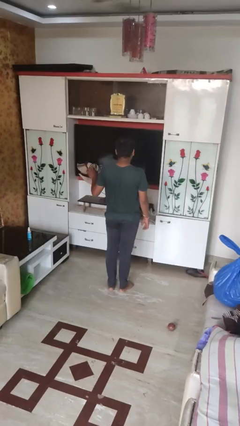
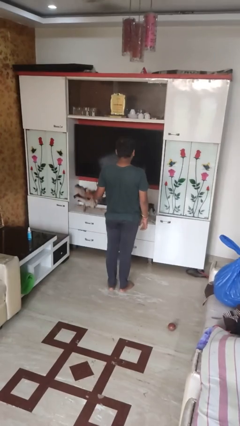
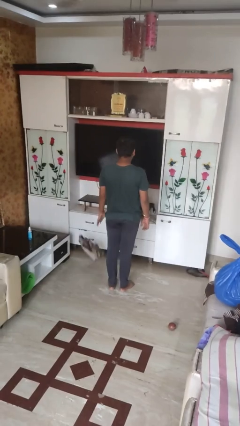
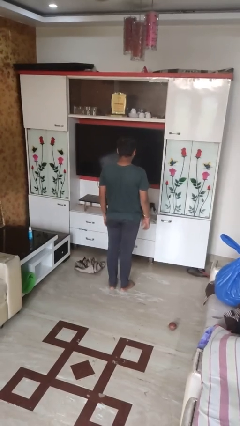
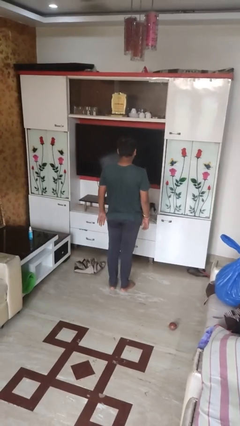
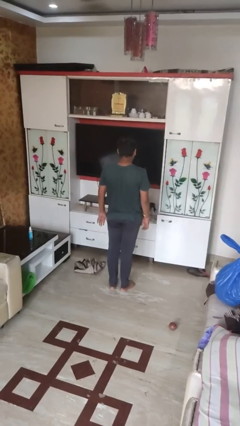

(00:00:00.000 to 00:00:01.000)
person throws object to ground

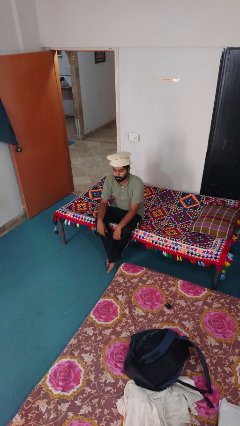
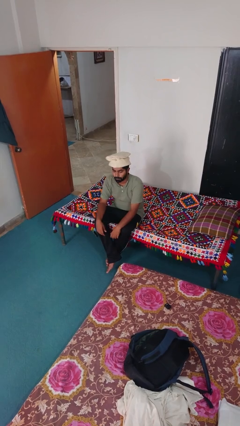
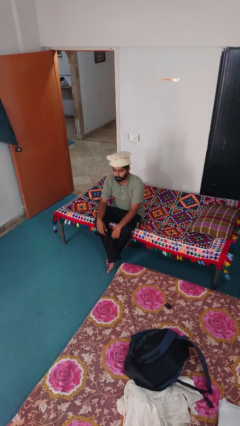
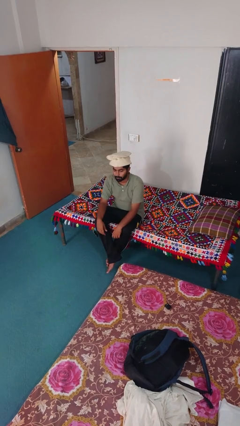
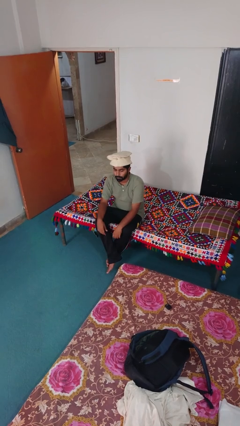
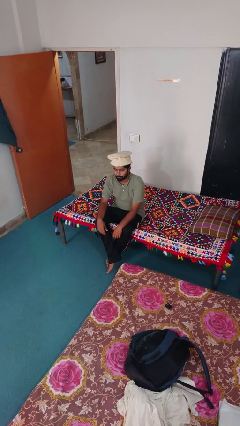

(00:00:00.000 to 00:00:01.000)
person takes off hat

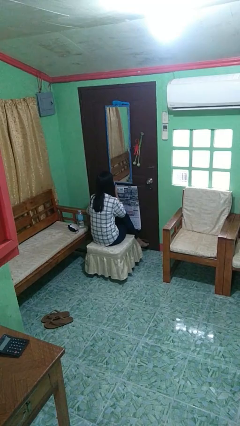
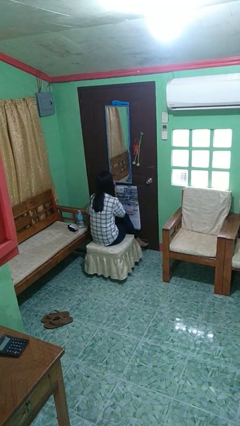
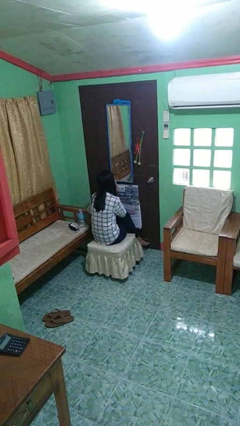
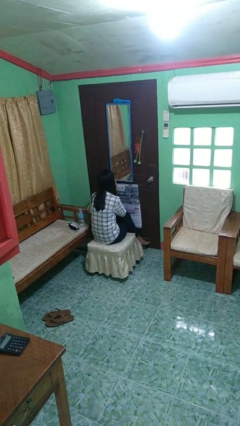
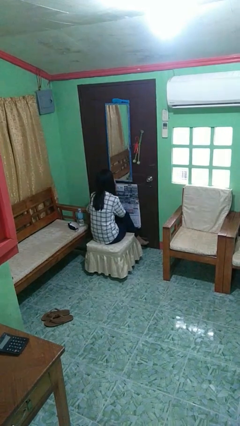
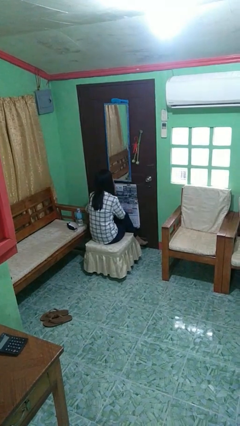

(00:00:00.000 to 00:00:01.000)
person wipes mouth with napkin

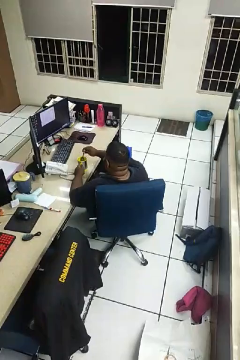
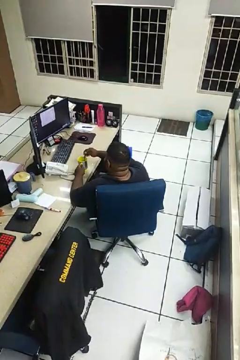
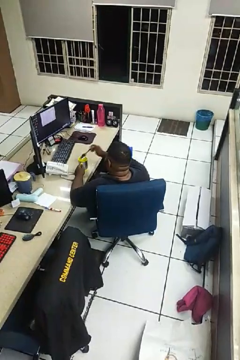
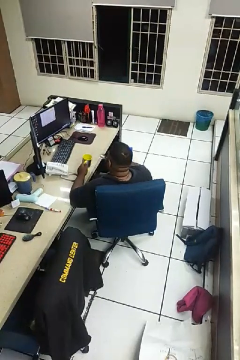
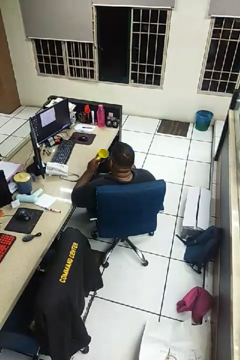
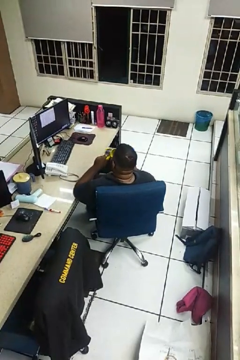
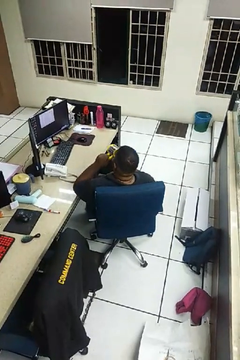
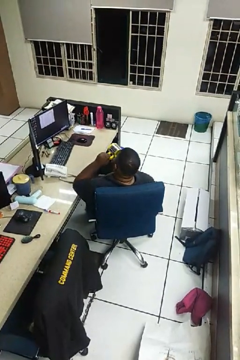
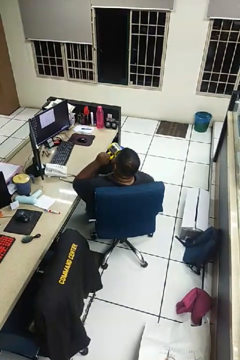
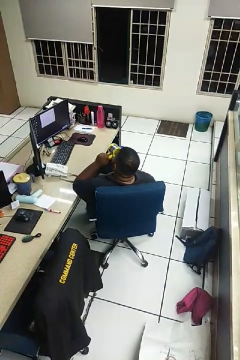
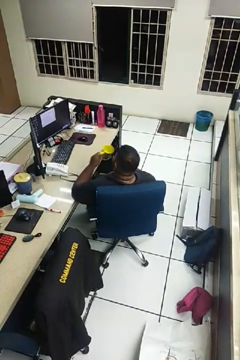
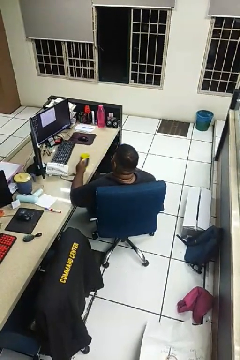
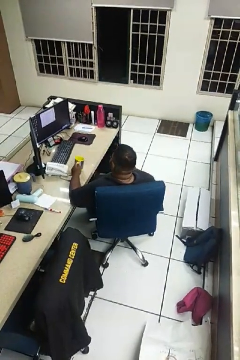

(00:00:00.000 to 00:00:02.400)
person drinks from mug

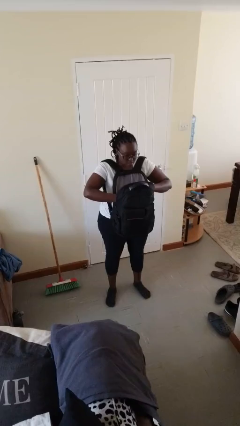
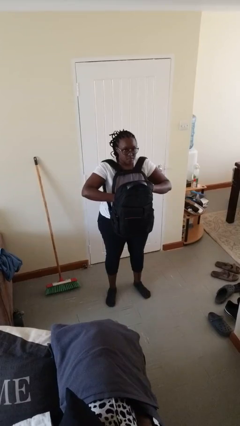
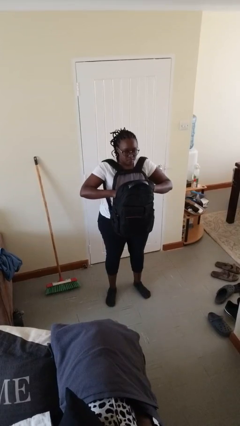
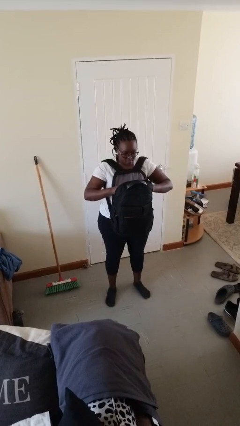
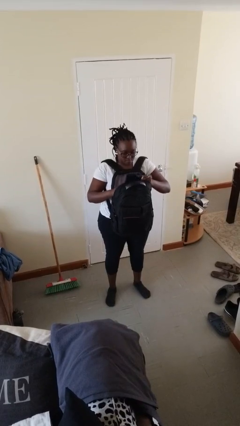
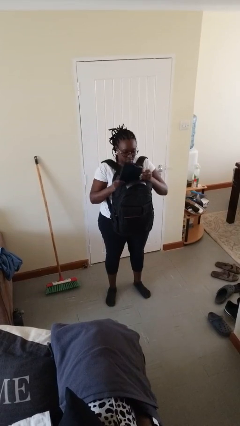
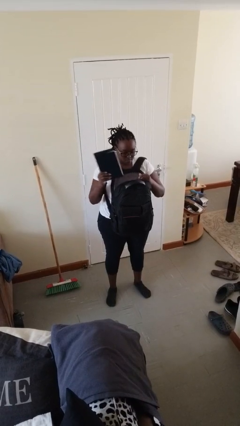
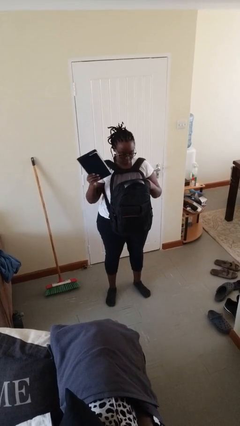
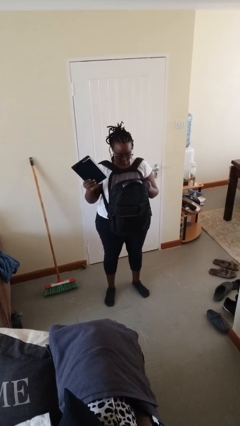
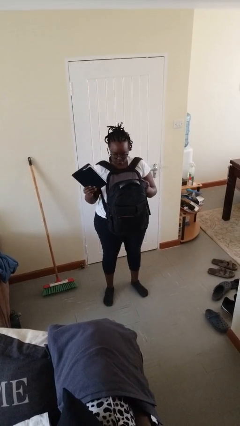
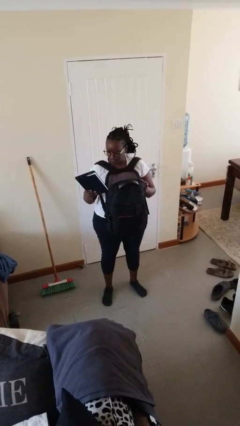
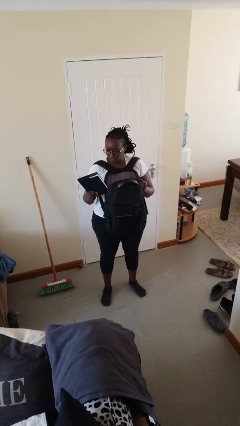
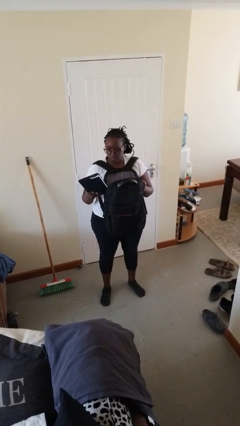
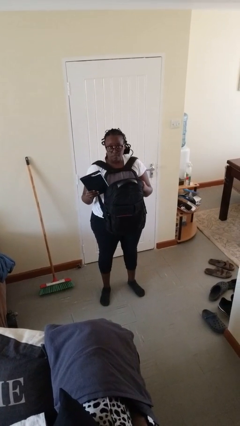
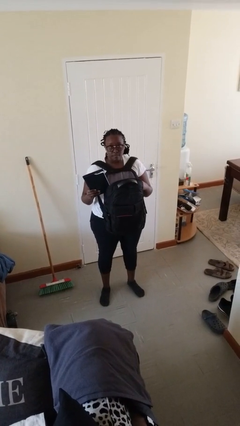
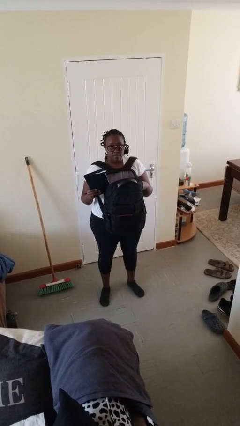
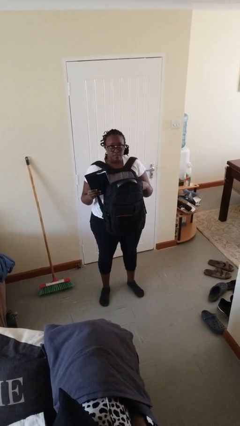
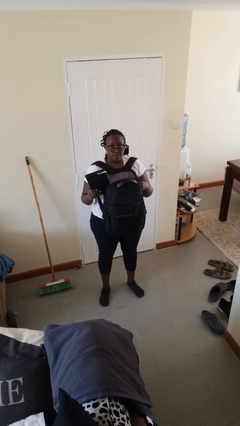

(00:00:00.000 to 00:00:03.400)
person takes object from backpack

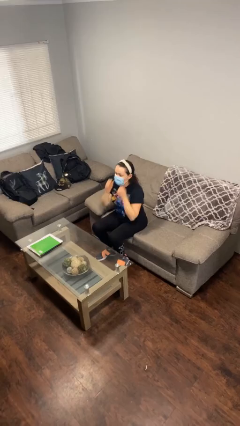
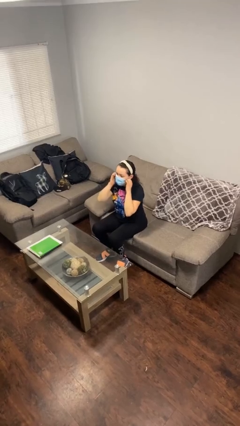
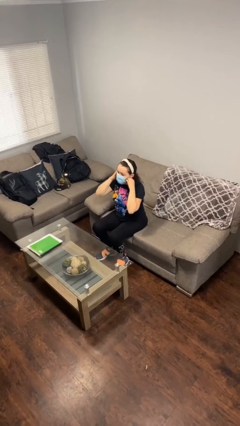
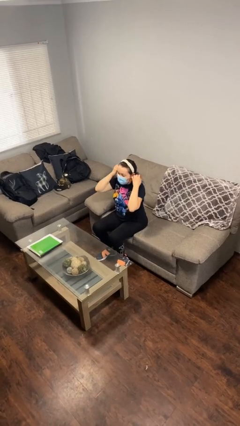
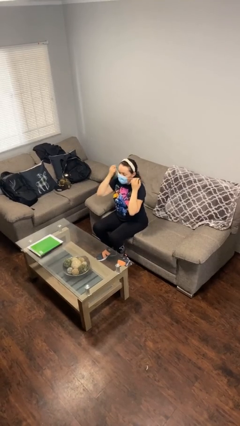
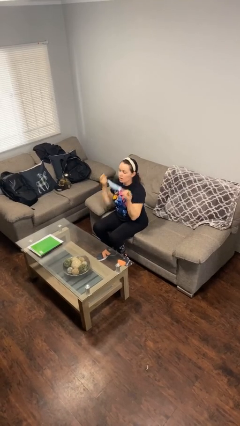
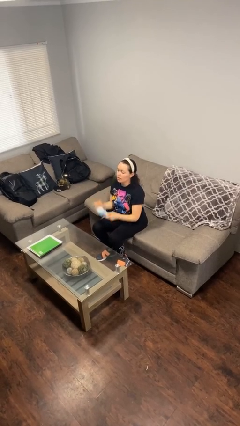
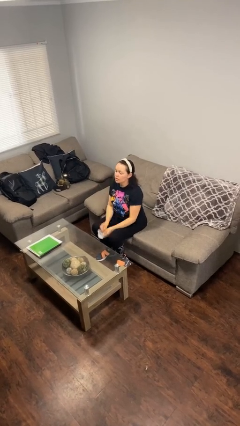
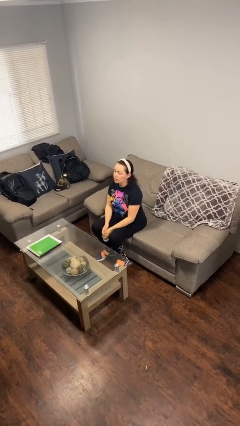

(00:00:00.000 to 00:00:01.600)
person takes off facemask

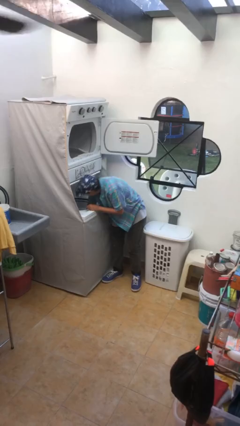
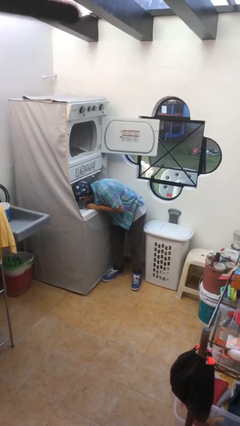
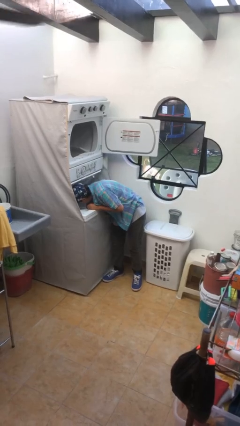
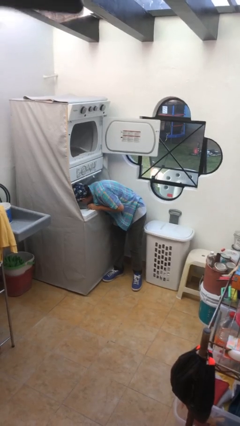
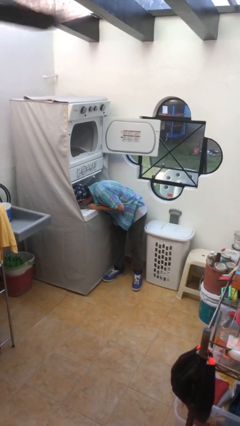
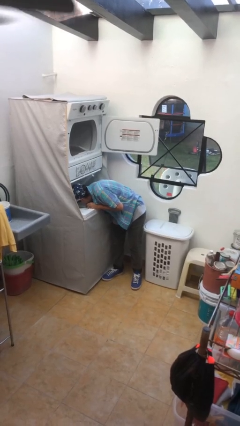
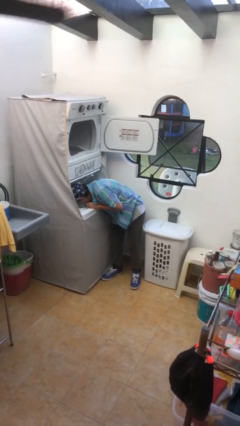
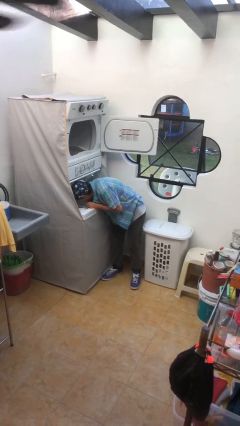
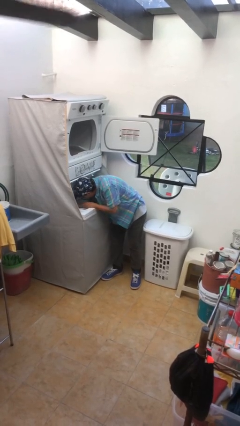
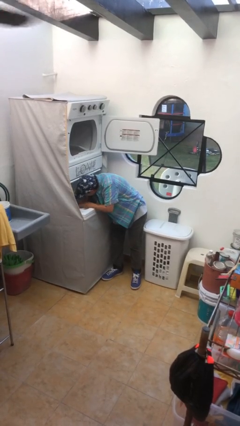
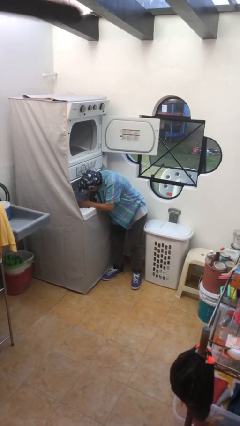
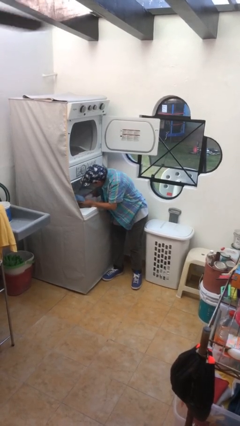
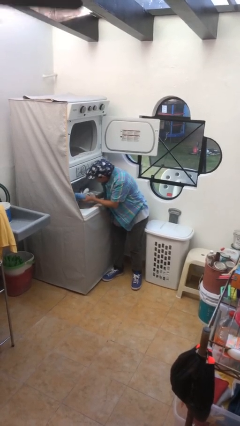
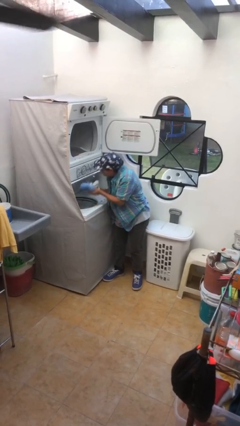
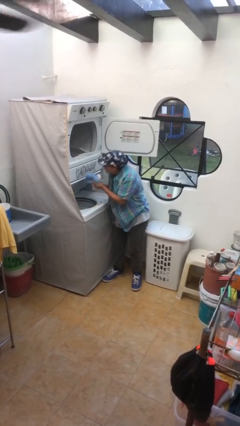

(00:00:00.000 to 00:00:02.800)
person unloads clotheswasher

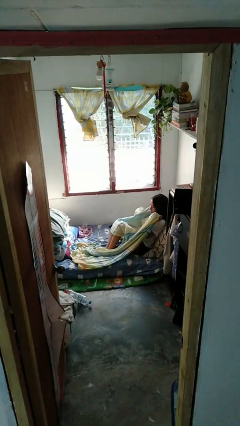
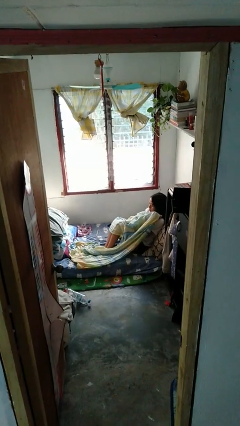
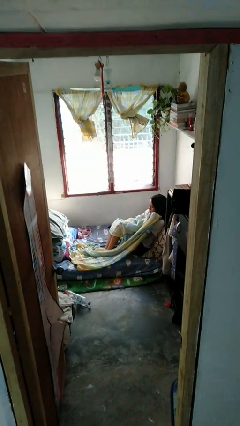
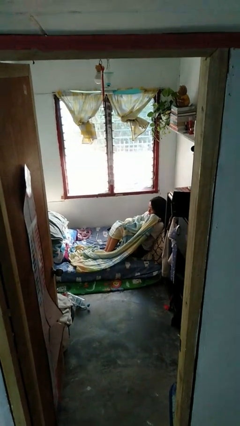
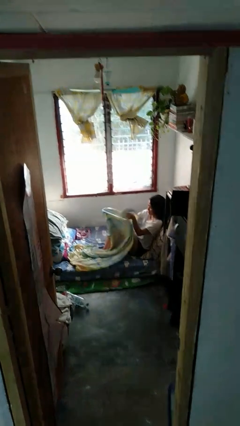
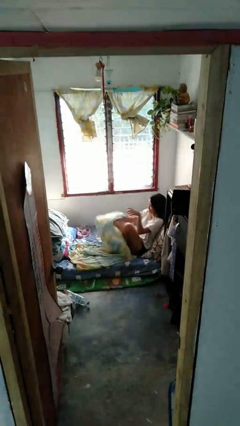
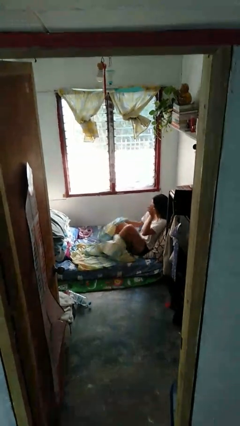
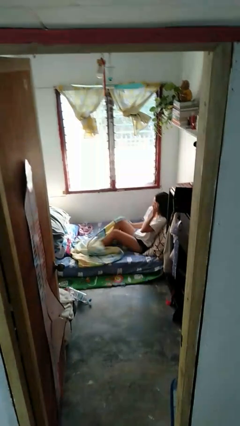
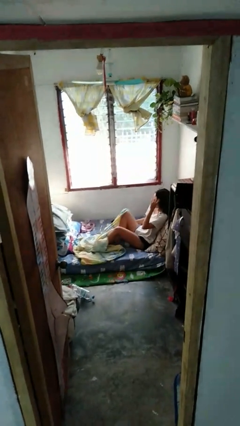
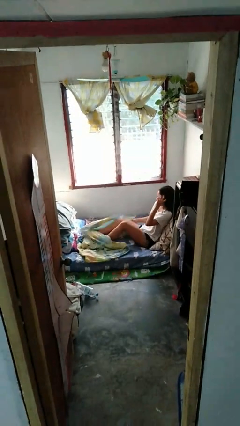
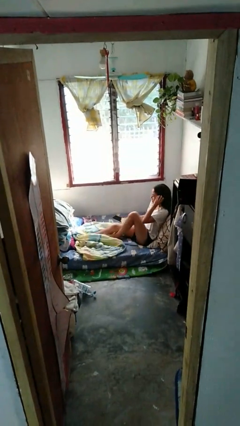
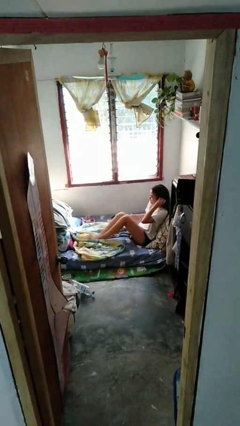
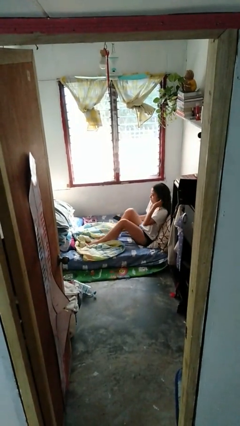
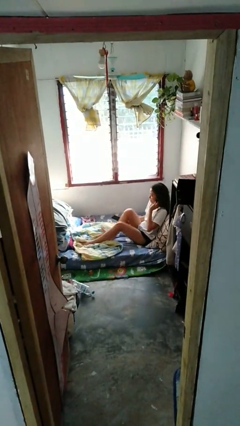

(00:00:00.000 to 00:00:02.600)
person uncovers with bedsheets

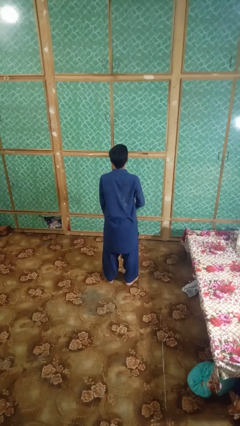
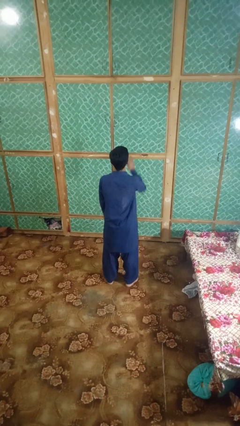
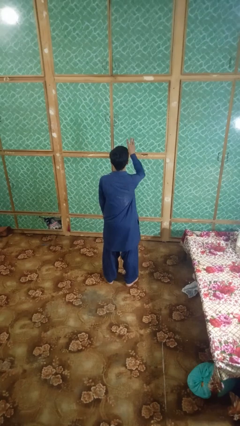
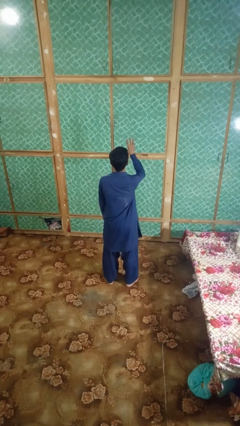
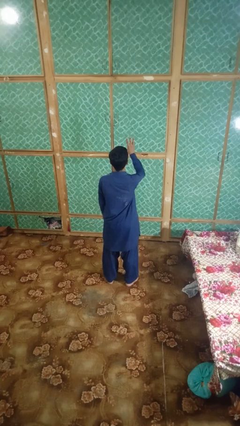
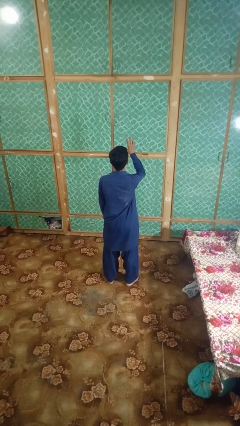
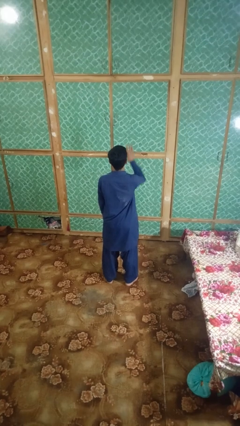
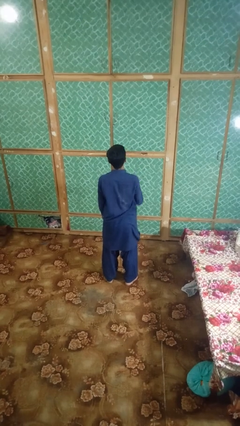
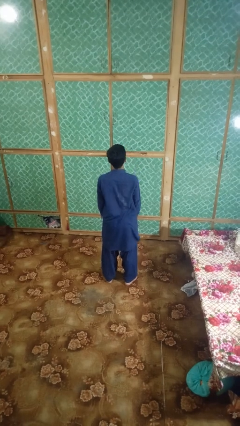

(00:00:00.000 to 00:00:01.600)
person gestures number three
